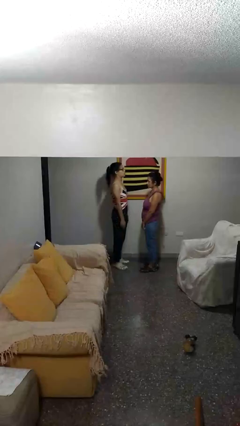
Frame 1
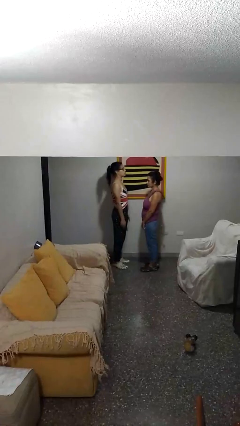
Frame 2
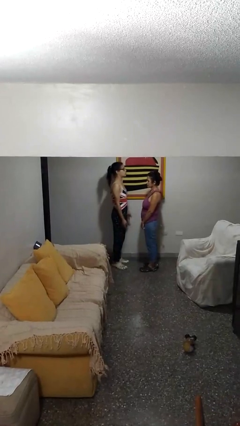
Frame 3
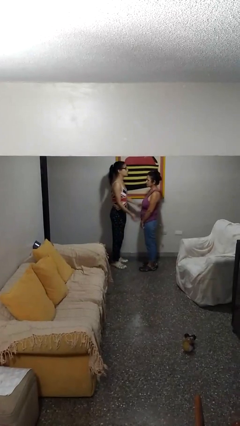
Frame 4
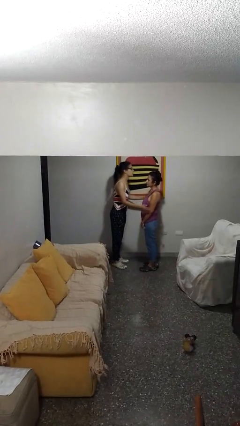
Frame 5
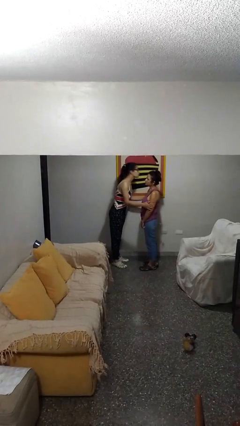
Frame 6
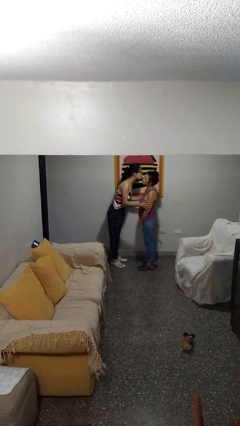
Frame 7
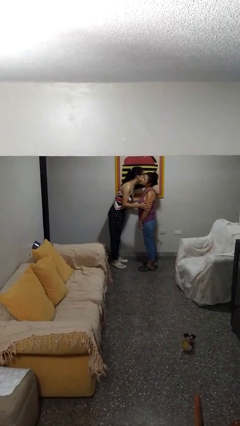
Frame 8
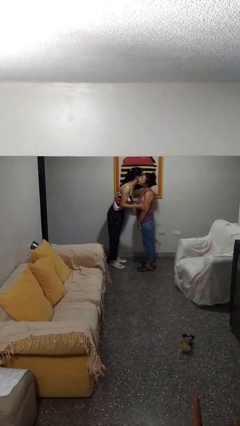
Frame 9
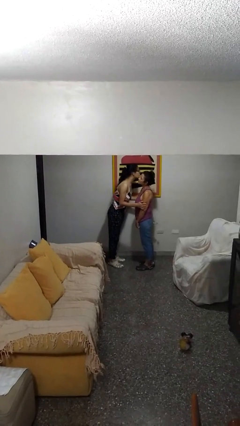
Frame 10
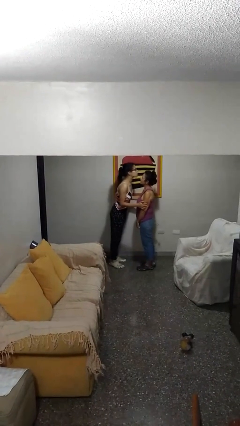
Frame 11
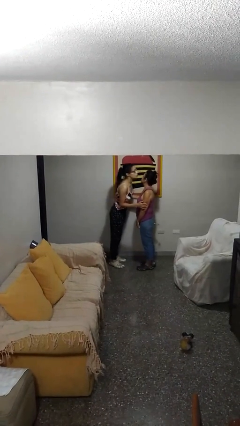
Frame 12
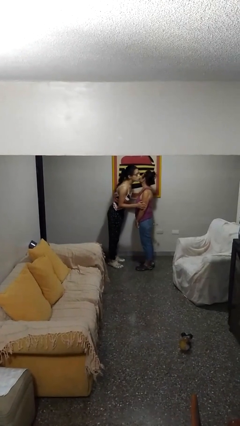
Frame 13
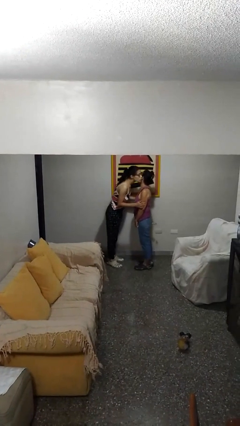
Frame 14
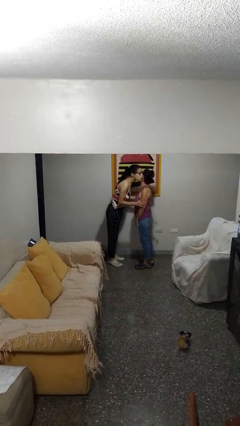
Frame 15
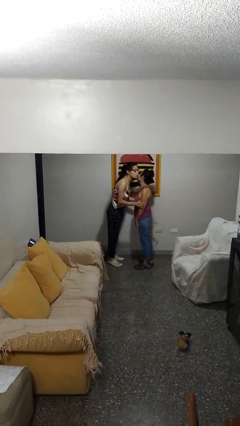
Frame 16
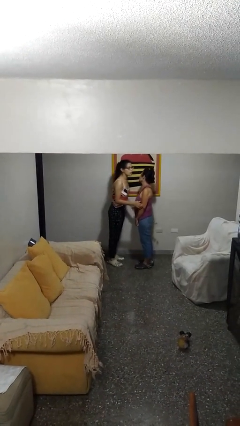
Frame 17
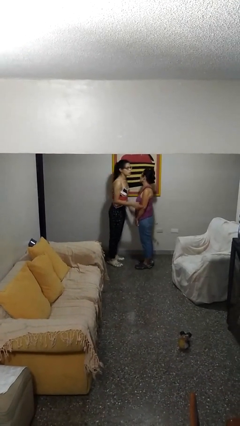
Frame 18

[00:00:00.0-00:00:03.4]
person kisses cheek of person

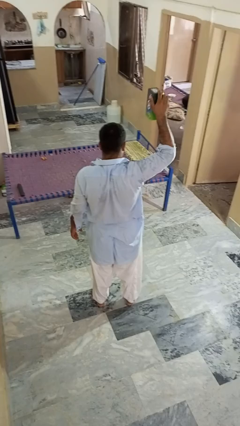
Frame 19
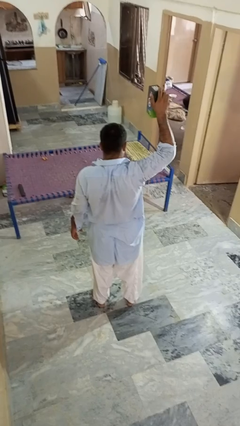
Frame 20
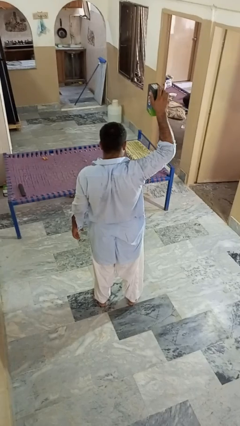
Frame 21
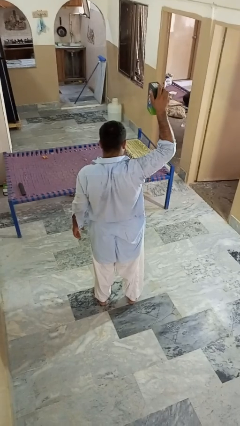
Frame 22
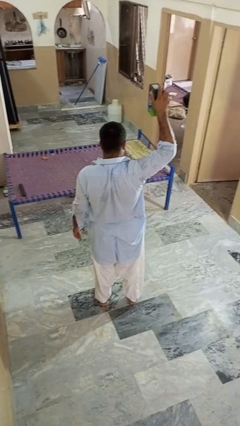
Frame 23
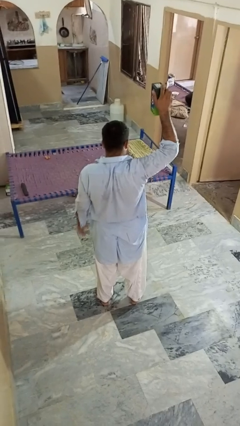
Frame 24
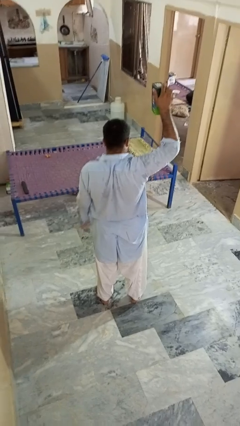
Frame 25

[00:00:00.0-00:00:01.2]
person drops object

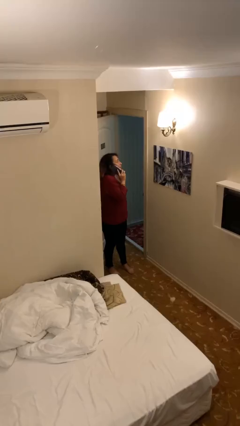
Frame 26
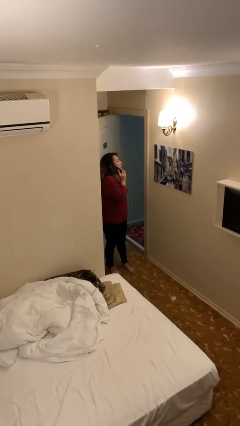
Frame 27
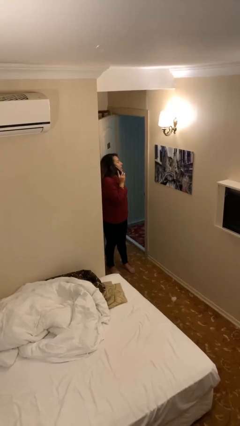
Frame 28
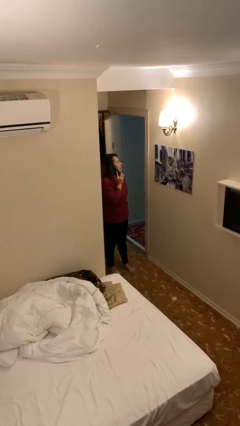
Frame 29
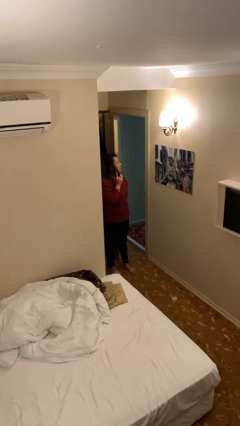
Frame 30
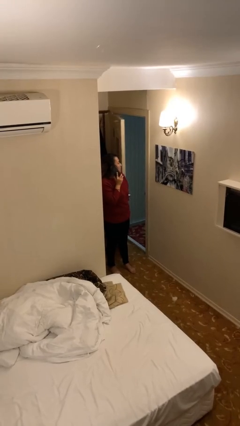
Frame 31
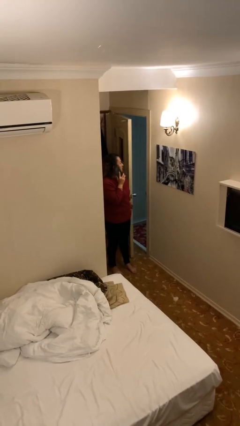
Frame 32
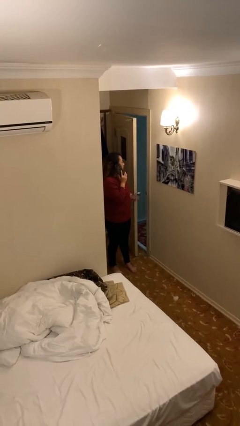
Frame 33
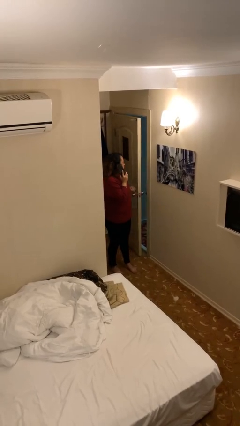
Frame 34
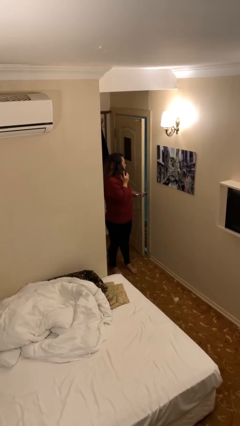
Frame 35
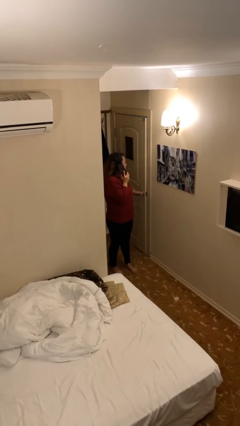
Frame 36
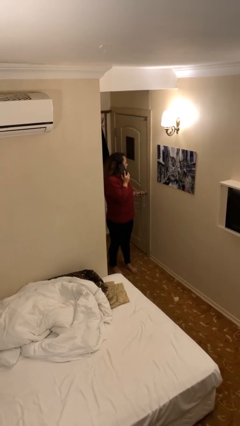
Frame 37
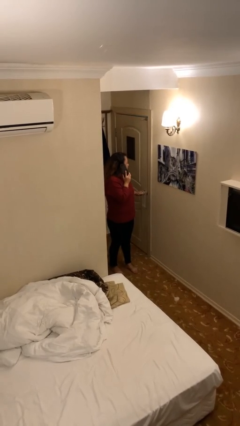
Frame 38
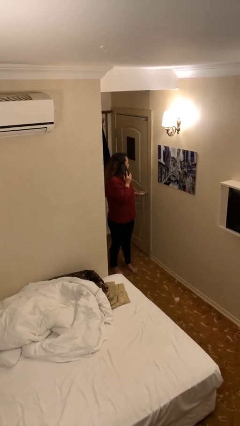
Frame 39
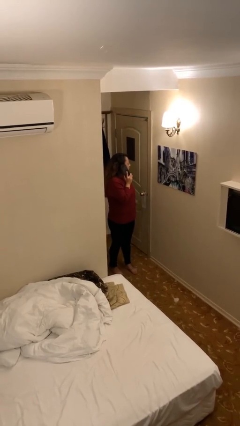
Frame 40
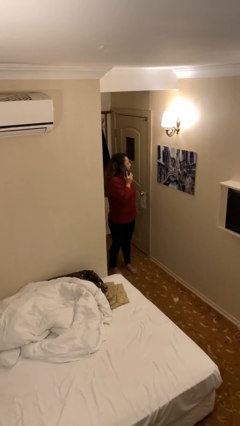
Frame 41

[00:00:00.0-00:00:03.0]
person closes facility door

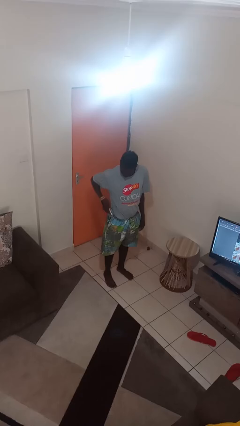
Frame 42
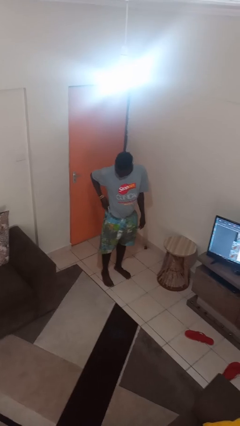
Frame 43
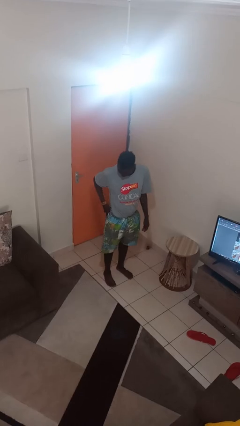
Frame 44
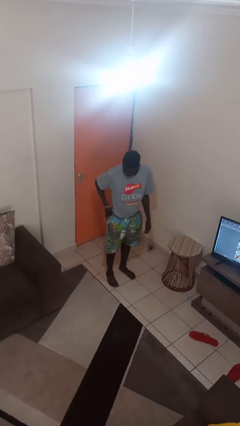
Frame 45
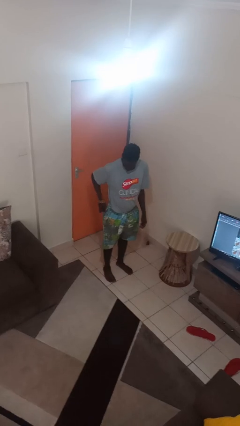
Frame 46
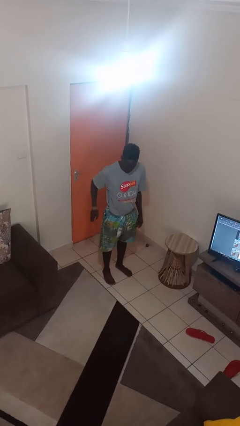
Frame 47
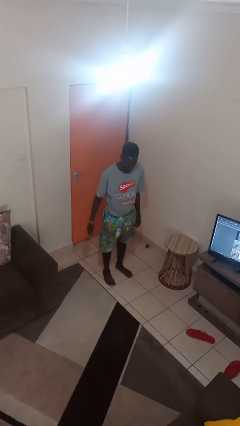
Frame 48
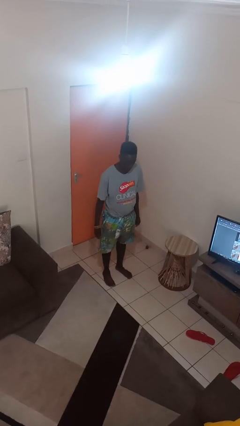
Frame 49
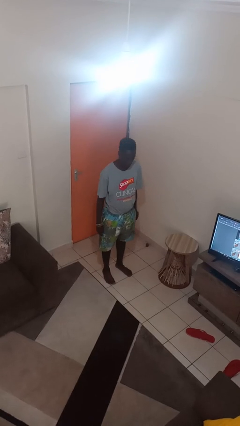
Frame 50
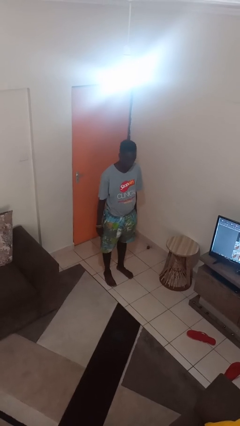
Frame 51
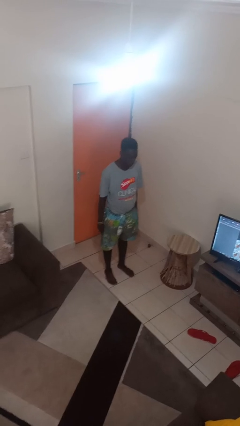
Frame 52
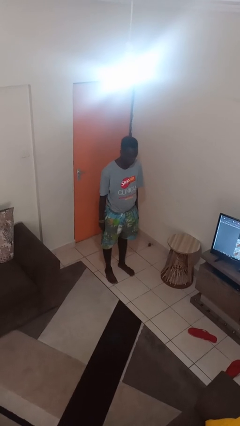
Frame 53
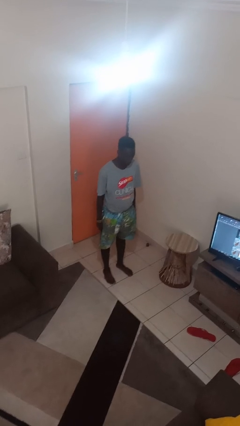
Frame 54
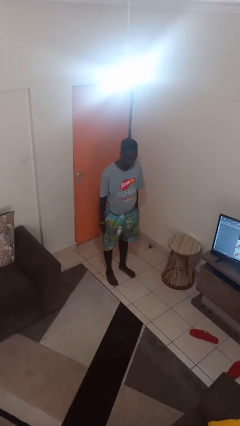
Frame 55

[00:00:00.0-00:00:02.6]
person puts phone into pocket

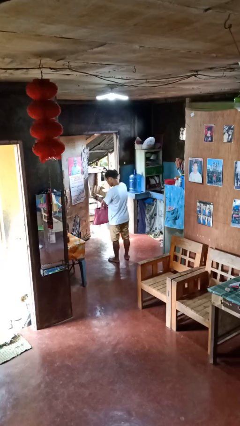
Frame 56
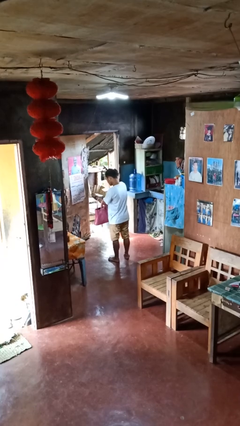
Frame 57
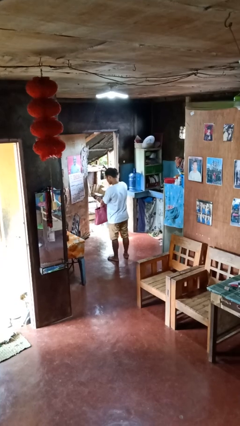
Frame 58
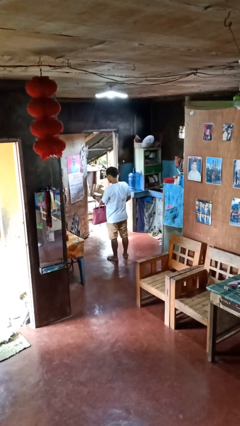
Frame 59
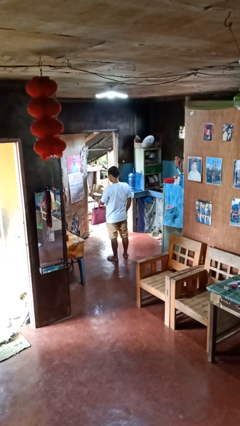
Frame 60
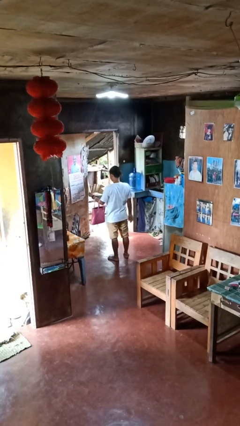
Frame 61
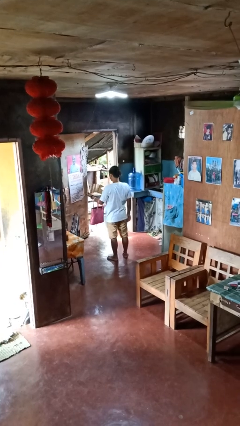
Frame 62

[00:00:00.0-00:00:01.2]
person puts object into purse

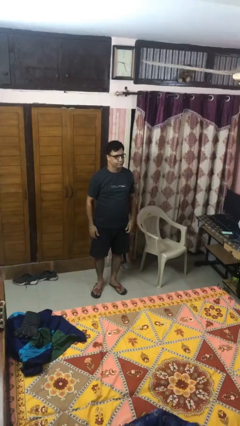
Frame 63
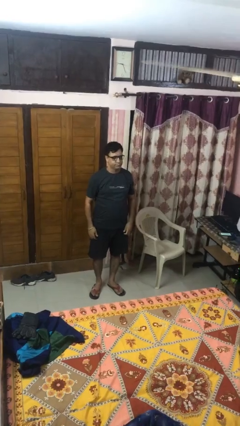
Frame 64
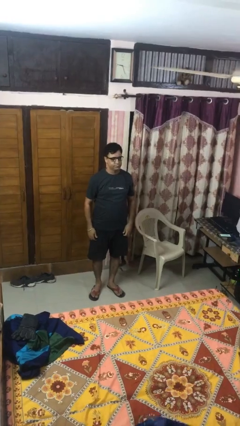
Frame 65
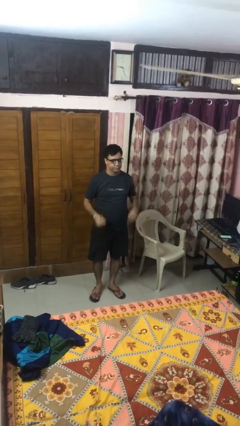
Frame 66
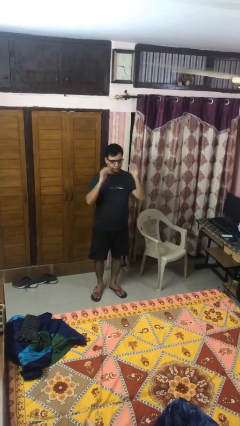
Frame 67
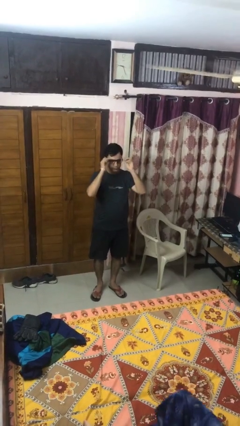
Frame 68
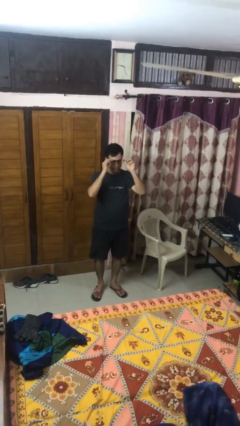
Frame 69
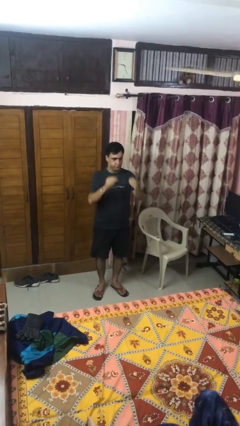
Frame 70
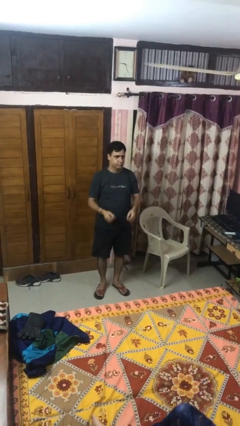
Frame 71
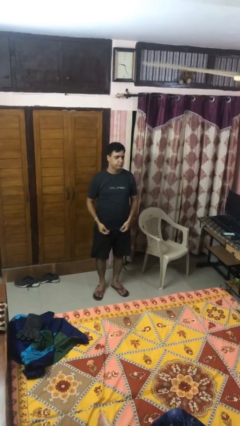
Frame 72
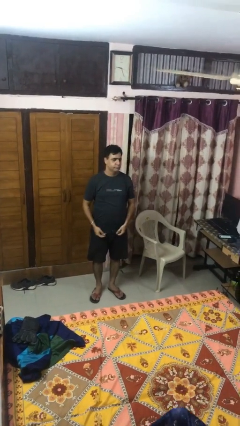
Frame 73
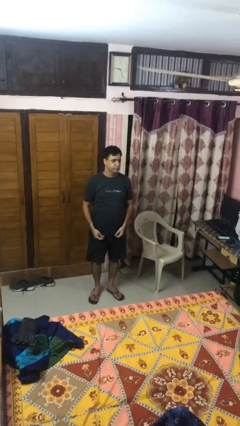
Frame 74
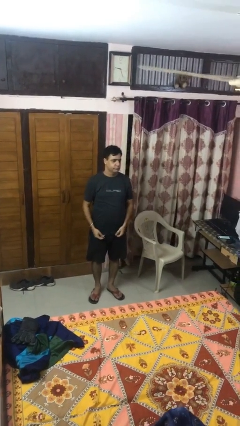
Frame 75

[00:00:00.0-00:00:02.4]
person takes off glasses

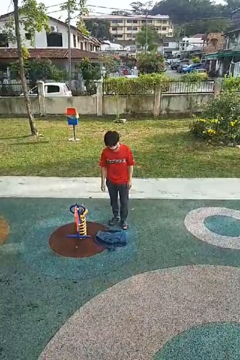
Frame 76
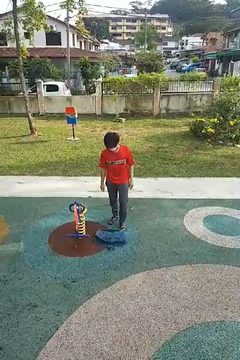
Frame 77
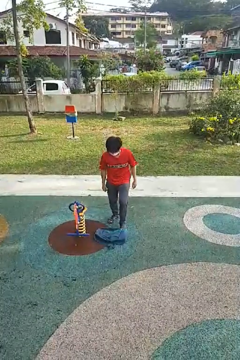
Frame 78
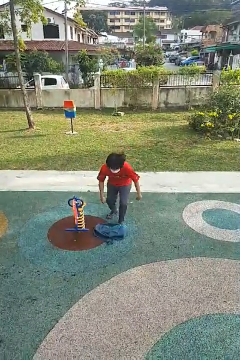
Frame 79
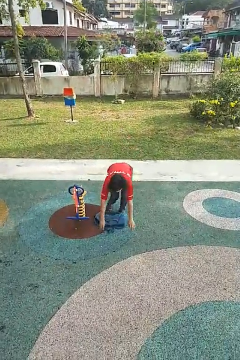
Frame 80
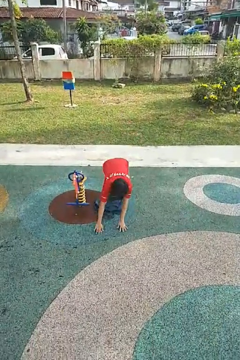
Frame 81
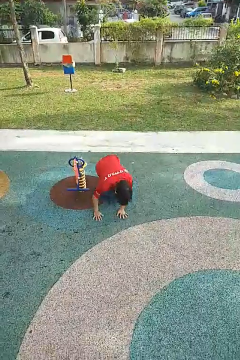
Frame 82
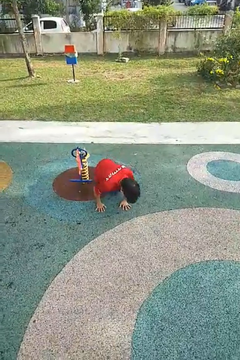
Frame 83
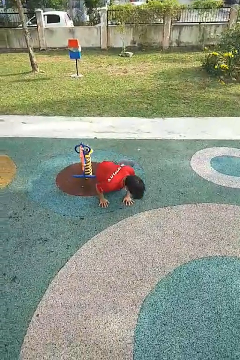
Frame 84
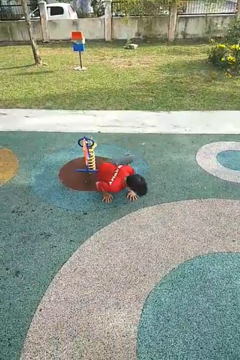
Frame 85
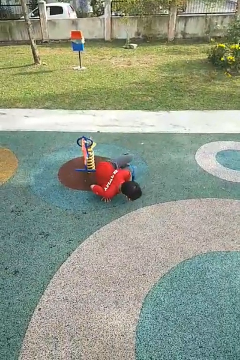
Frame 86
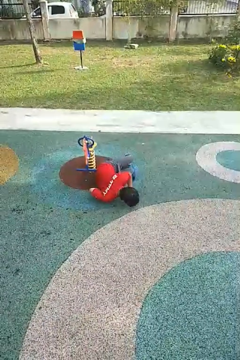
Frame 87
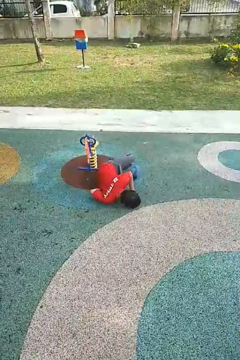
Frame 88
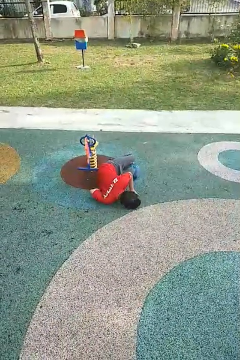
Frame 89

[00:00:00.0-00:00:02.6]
person trips on object on floor

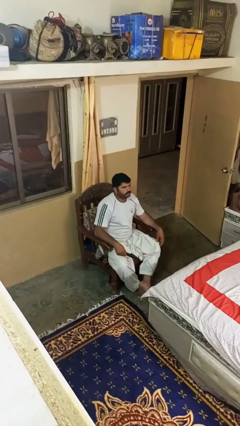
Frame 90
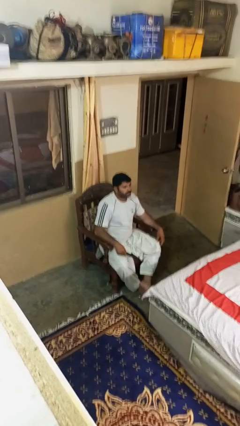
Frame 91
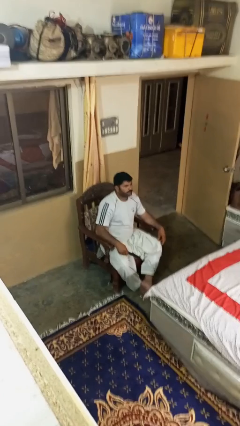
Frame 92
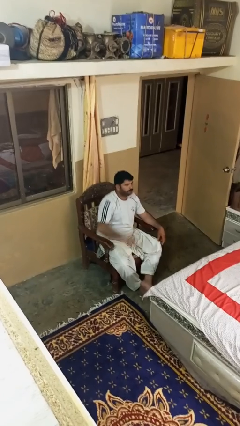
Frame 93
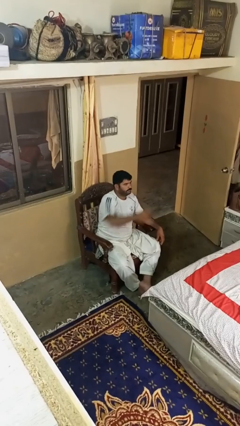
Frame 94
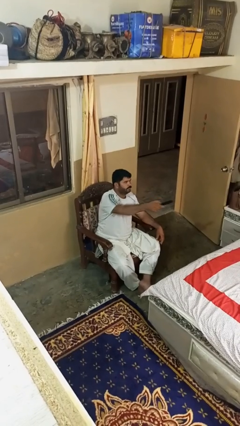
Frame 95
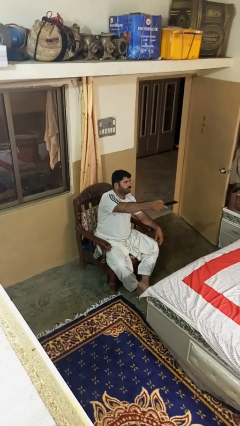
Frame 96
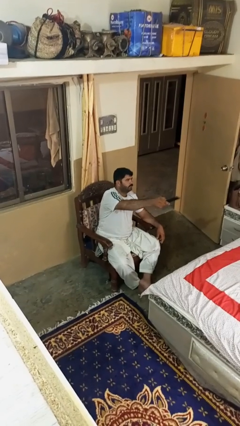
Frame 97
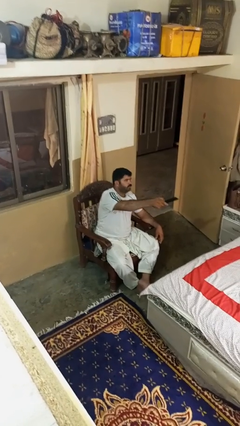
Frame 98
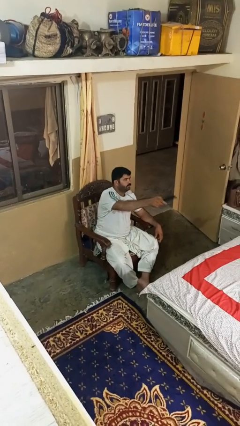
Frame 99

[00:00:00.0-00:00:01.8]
person uses television remote
